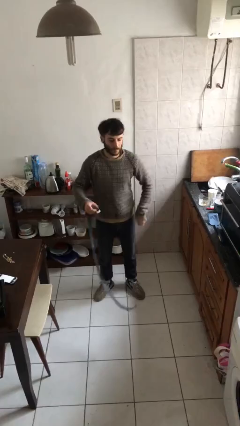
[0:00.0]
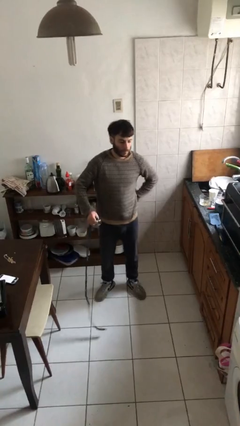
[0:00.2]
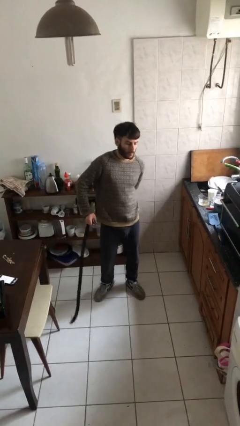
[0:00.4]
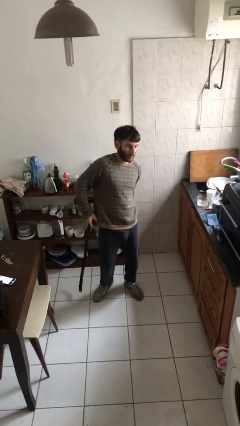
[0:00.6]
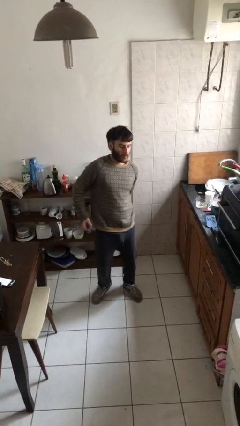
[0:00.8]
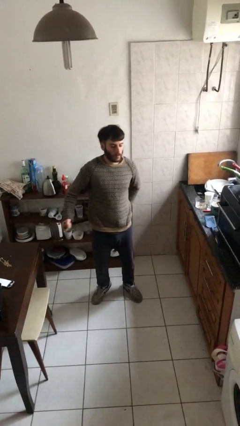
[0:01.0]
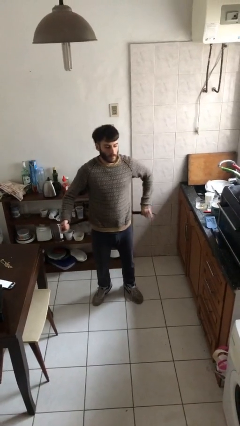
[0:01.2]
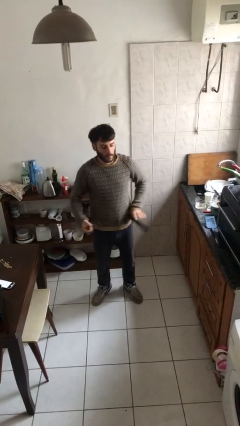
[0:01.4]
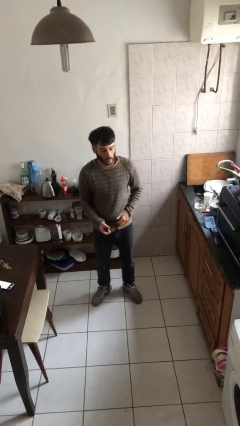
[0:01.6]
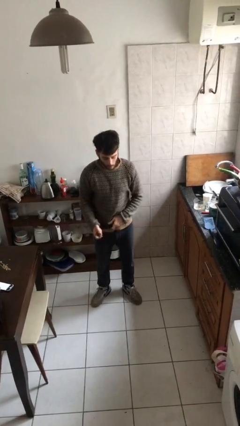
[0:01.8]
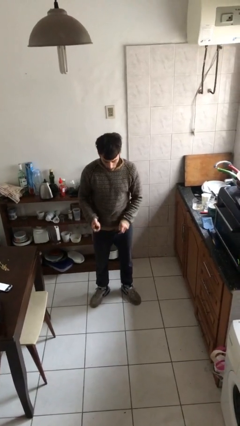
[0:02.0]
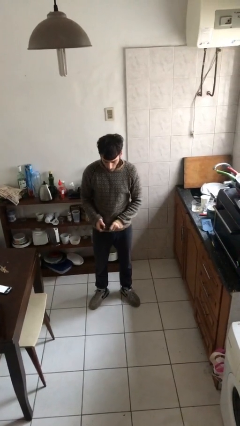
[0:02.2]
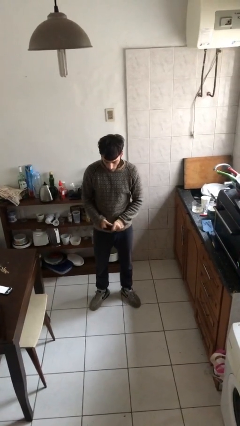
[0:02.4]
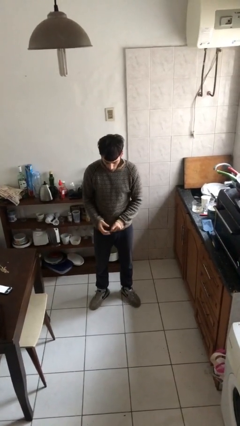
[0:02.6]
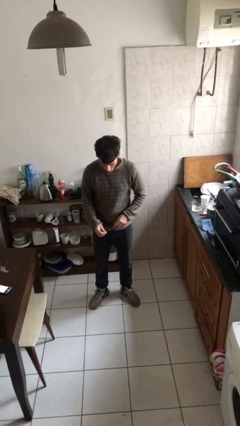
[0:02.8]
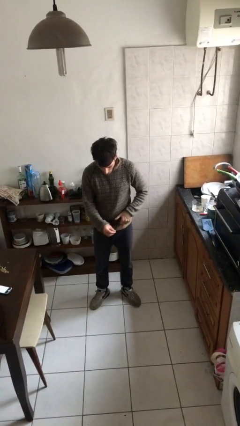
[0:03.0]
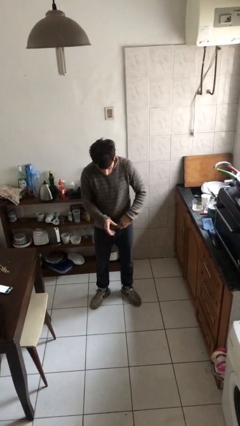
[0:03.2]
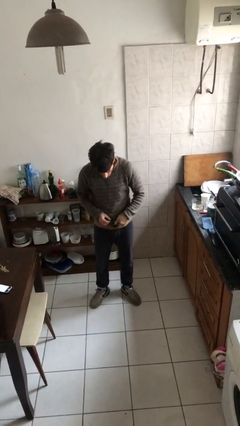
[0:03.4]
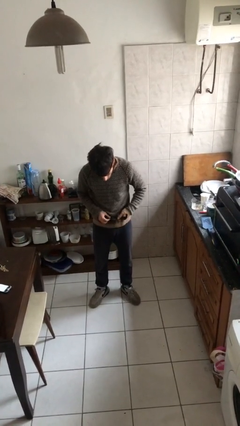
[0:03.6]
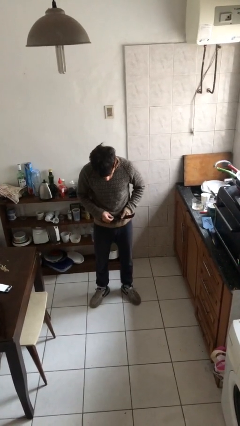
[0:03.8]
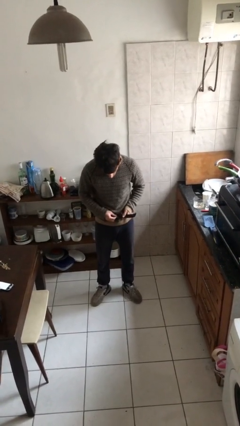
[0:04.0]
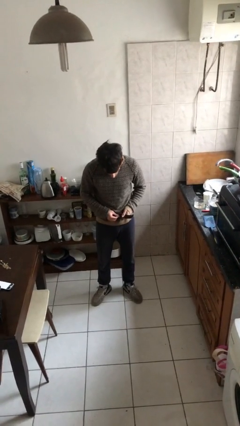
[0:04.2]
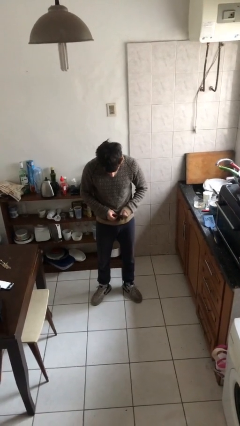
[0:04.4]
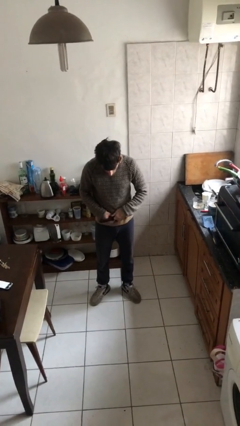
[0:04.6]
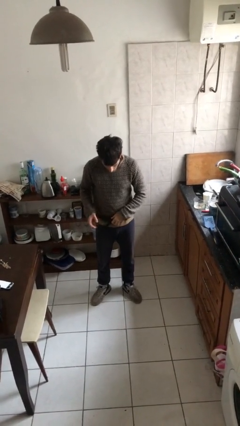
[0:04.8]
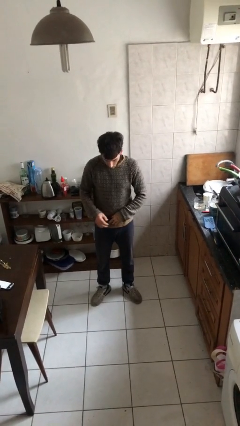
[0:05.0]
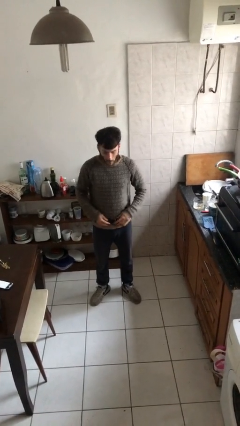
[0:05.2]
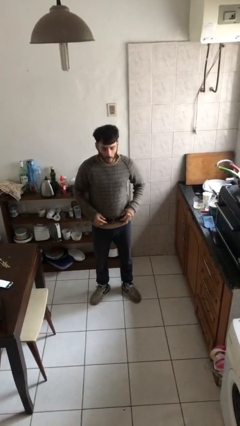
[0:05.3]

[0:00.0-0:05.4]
person puts on belt

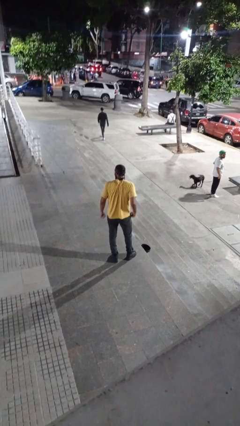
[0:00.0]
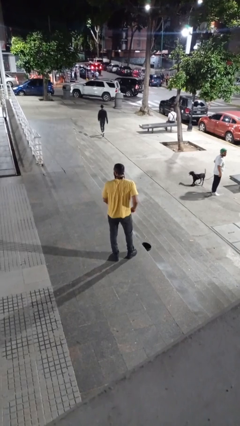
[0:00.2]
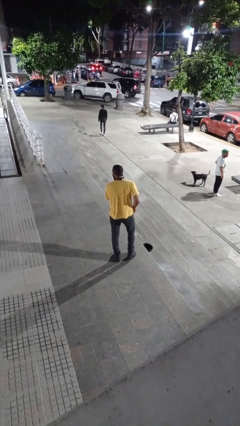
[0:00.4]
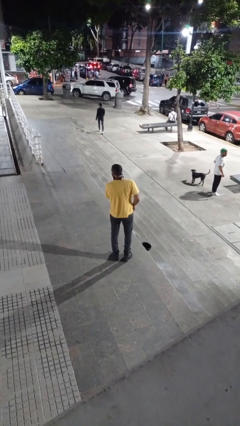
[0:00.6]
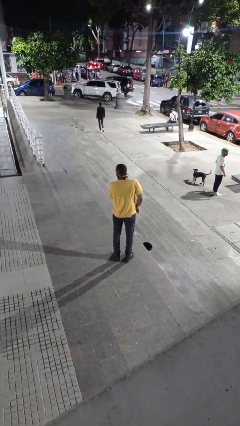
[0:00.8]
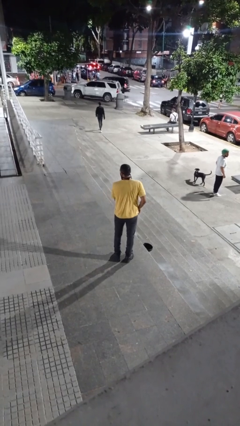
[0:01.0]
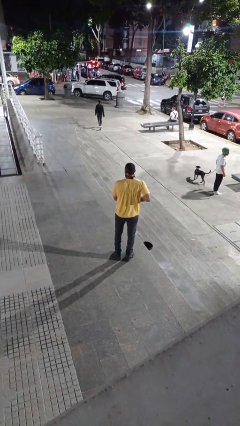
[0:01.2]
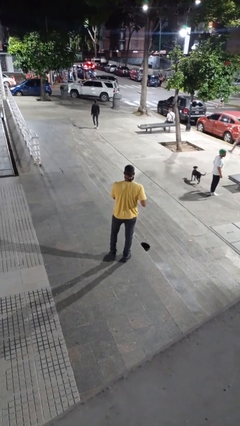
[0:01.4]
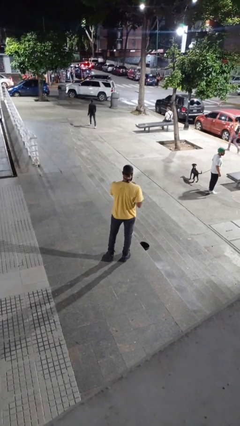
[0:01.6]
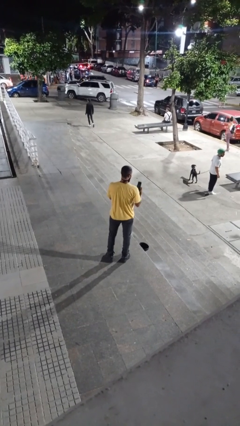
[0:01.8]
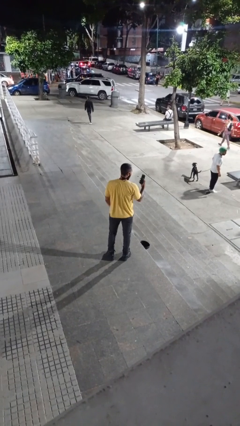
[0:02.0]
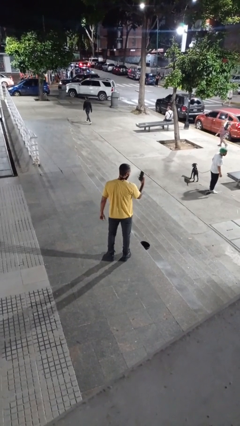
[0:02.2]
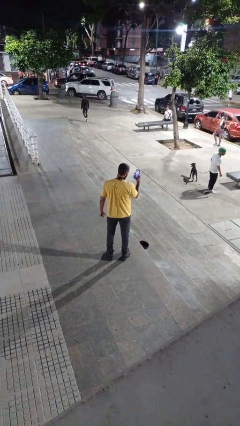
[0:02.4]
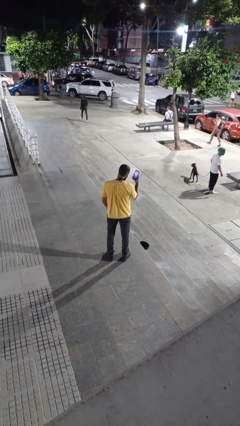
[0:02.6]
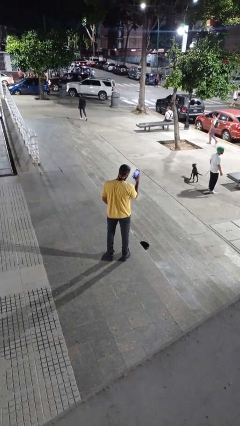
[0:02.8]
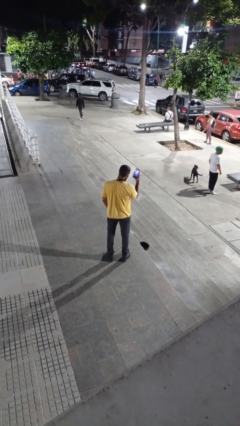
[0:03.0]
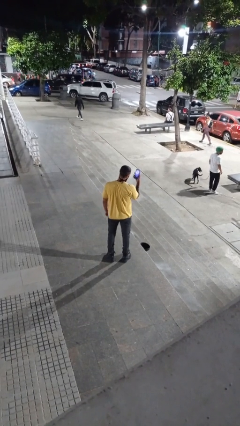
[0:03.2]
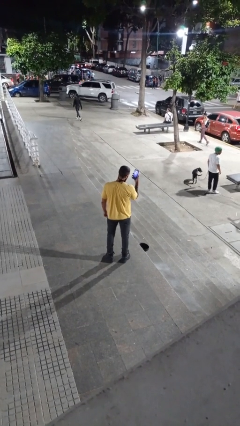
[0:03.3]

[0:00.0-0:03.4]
person takes phone from pocket

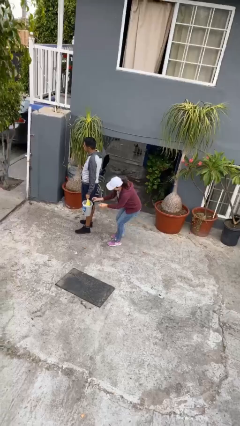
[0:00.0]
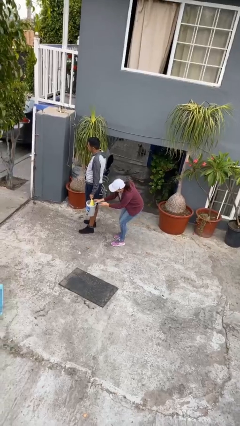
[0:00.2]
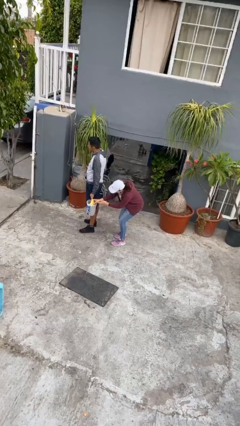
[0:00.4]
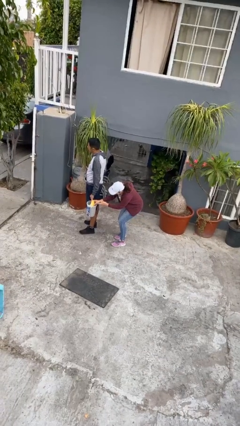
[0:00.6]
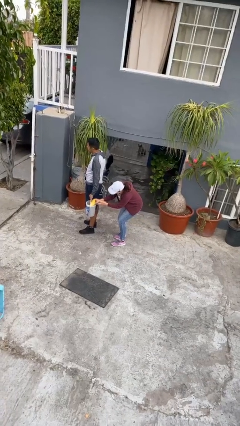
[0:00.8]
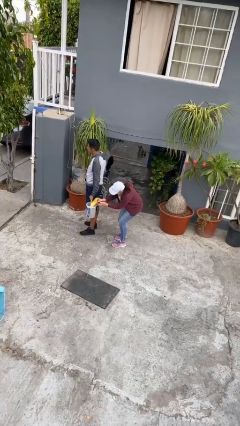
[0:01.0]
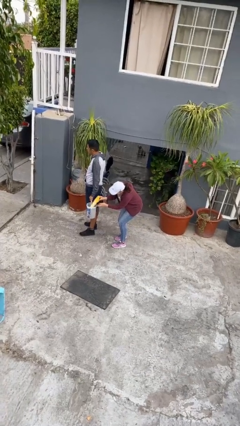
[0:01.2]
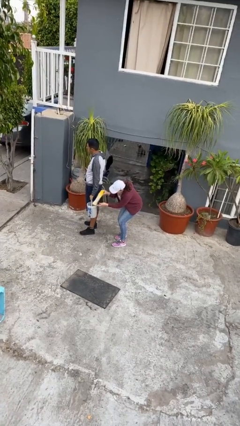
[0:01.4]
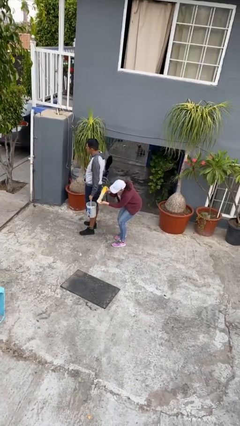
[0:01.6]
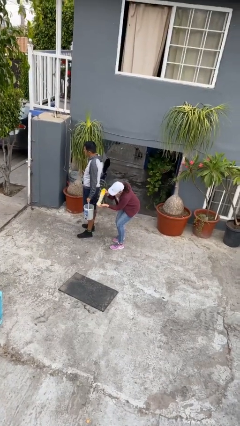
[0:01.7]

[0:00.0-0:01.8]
person steals object from person

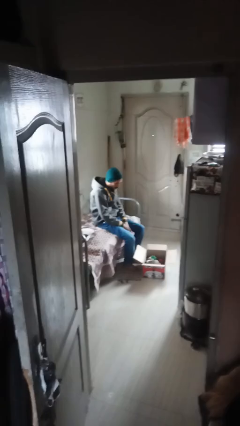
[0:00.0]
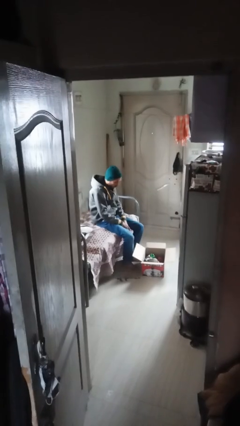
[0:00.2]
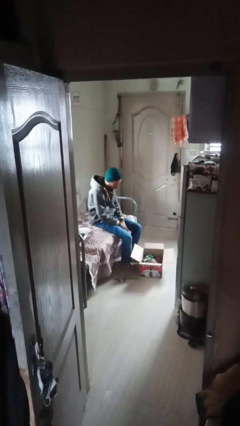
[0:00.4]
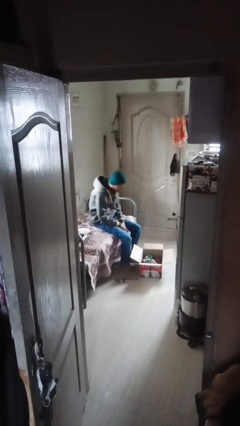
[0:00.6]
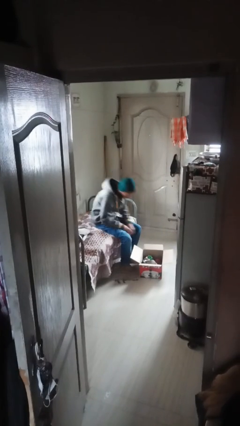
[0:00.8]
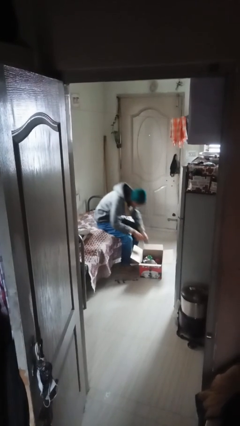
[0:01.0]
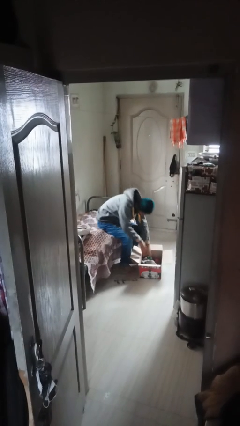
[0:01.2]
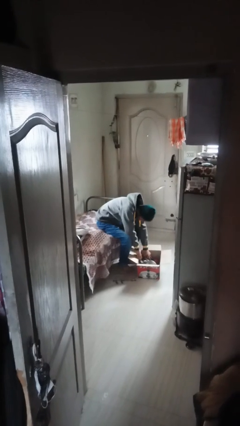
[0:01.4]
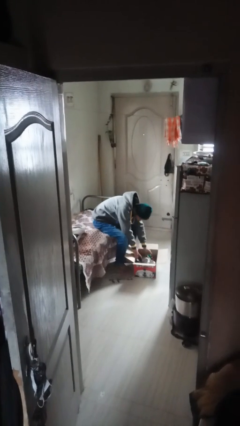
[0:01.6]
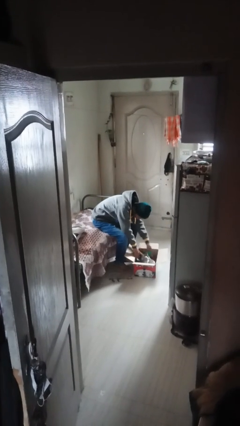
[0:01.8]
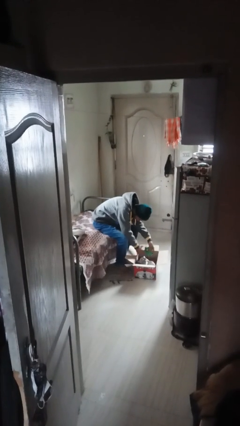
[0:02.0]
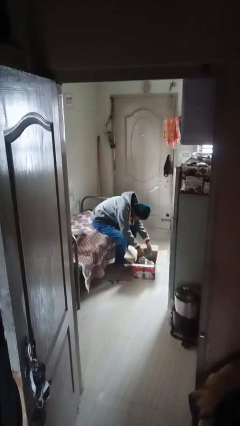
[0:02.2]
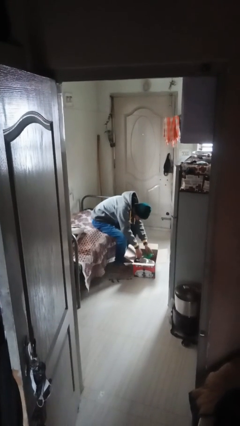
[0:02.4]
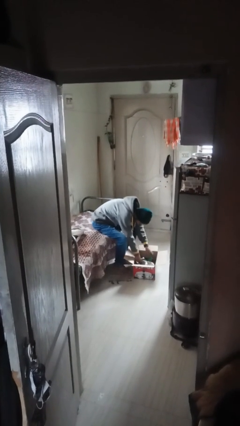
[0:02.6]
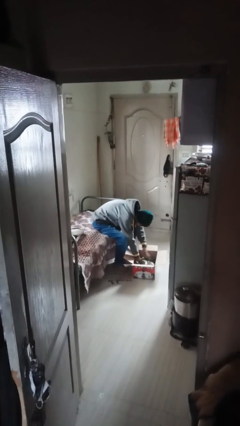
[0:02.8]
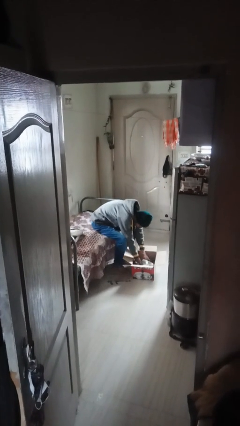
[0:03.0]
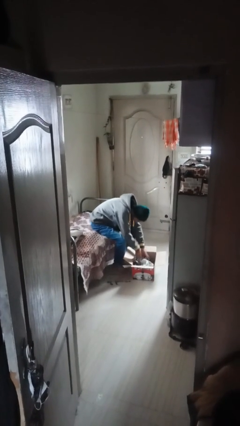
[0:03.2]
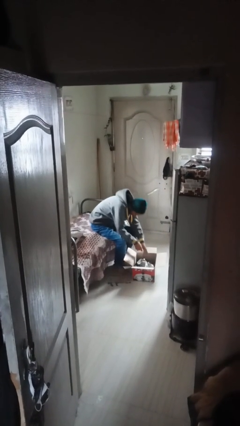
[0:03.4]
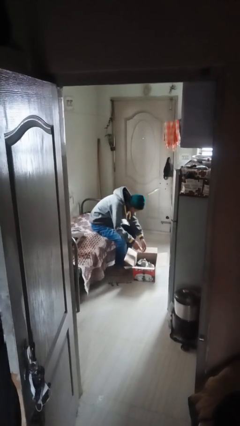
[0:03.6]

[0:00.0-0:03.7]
person searches in box

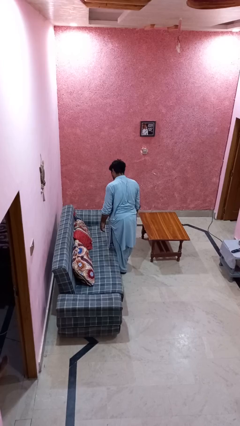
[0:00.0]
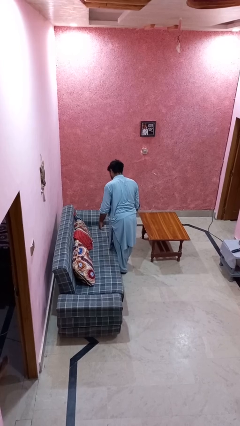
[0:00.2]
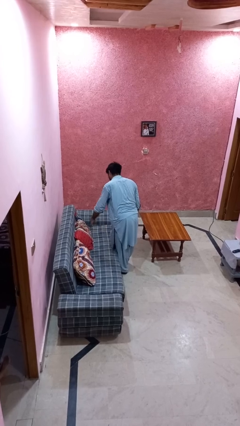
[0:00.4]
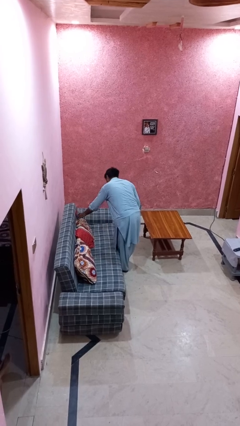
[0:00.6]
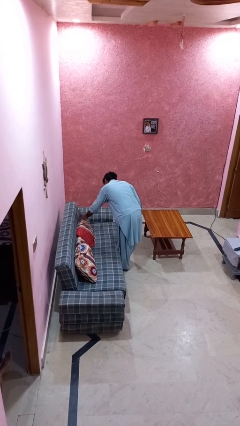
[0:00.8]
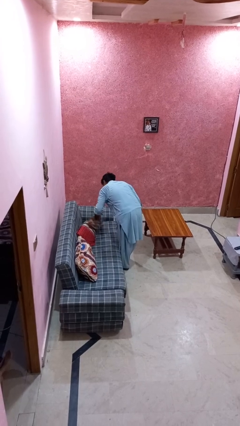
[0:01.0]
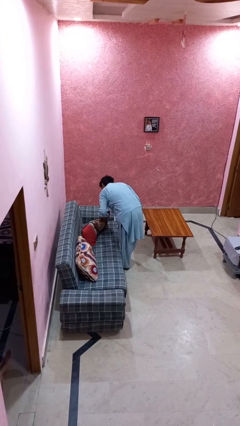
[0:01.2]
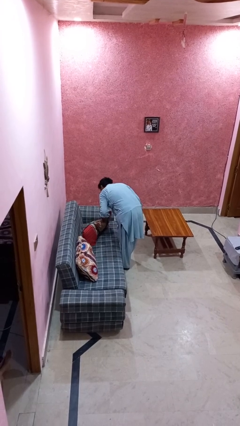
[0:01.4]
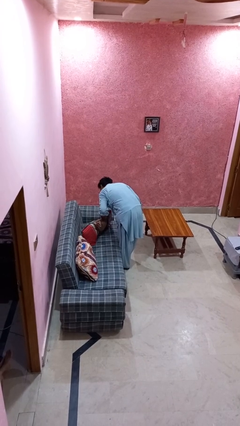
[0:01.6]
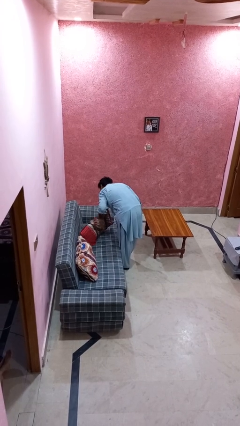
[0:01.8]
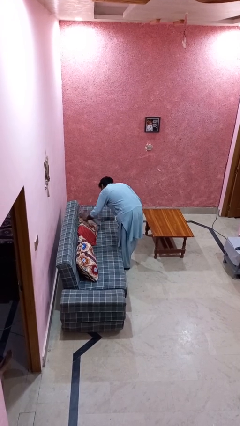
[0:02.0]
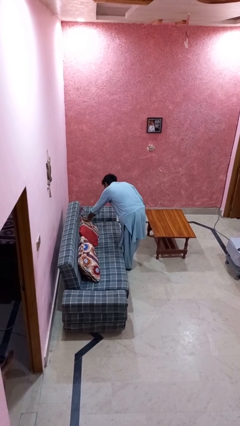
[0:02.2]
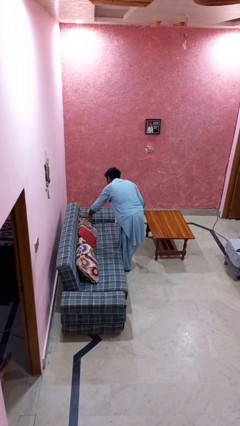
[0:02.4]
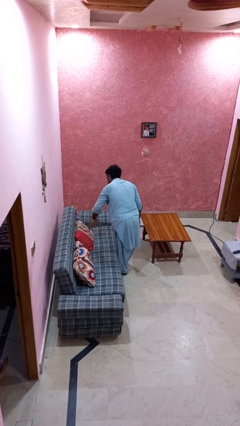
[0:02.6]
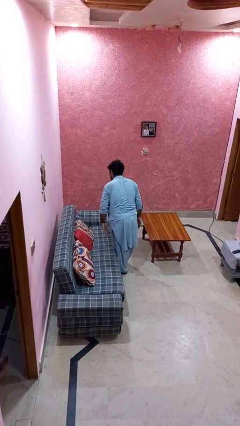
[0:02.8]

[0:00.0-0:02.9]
person searches in couch

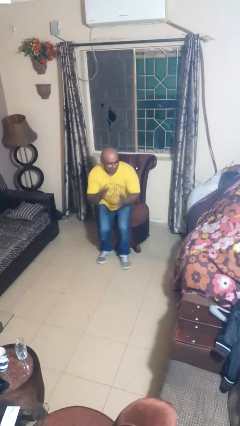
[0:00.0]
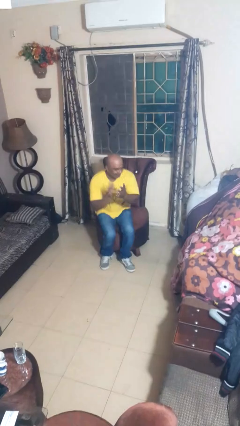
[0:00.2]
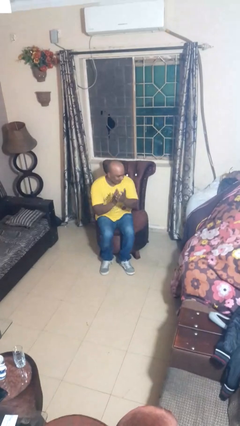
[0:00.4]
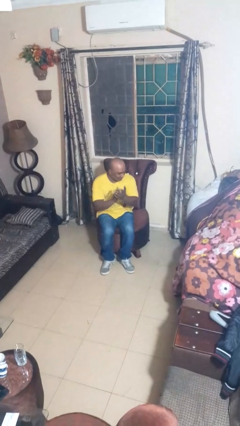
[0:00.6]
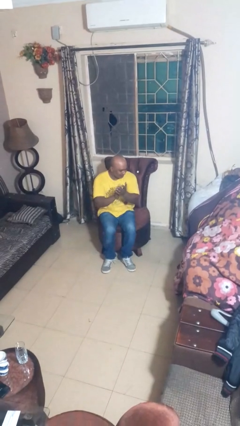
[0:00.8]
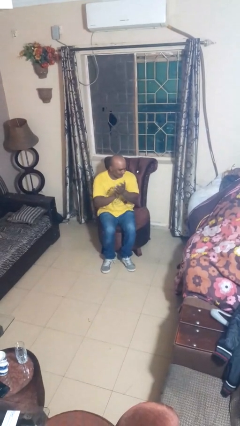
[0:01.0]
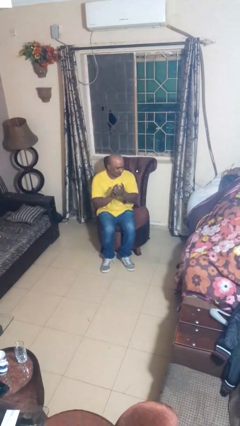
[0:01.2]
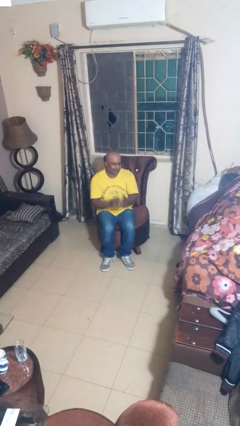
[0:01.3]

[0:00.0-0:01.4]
person claps hands
